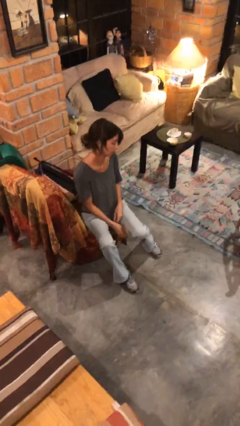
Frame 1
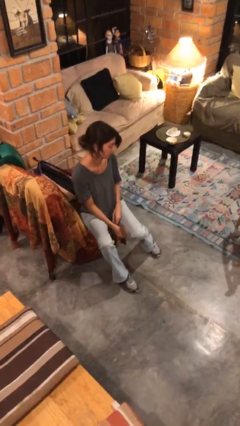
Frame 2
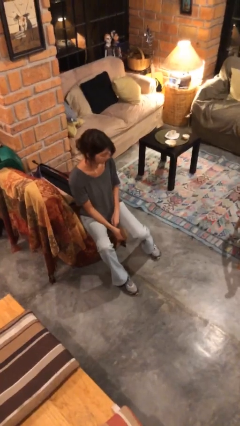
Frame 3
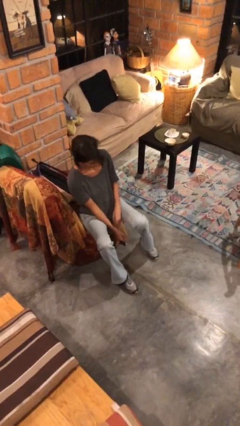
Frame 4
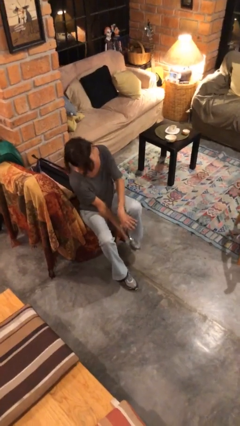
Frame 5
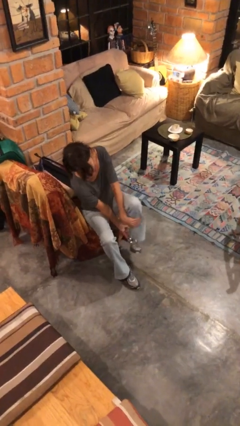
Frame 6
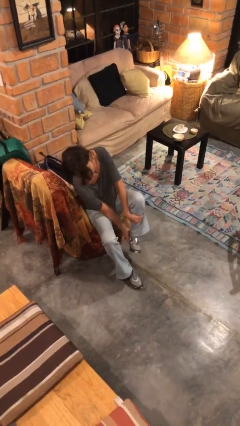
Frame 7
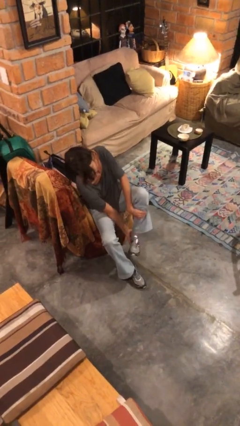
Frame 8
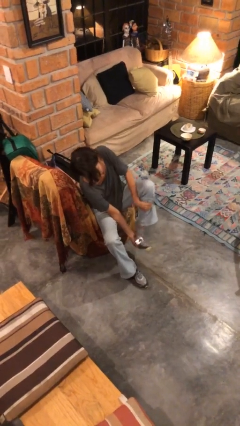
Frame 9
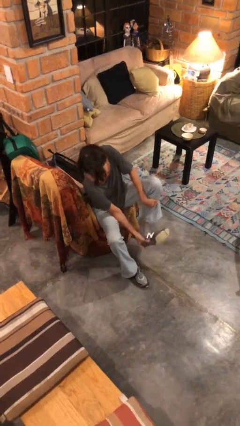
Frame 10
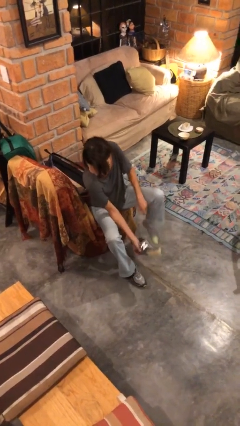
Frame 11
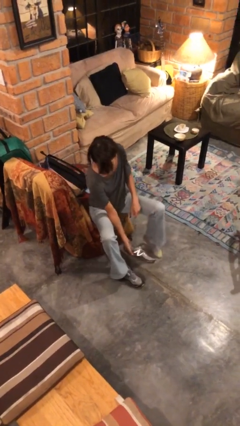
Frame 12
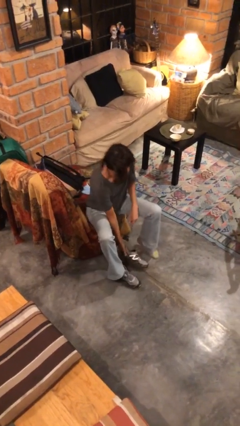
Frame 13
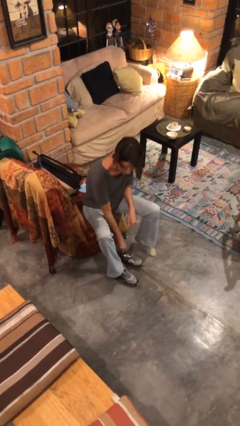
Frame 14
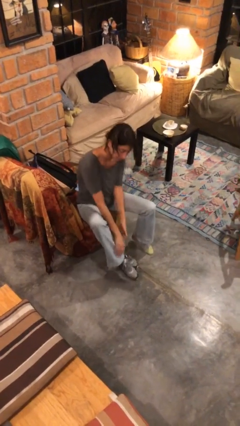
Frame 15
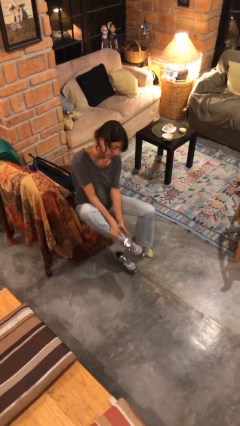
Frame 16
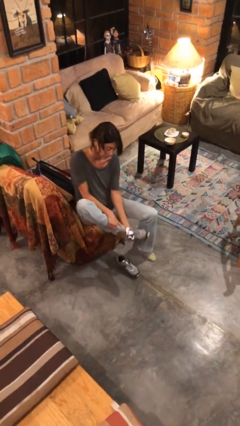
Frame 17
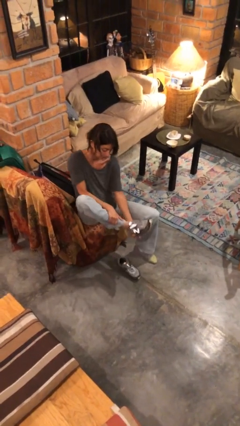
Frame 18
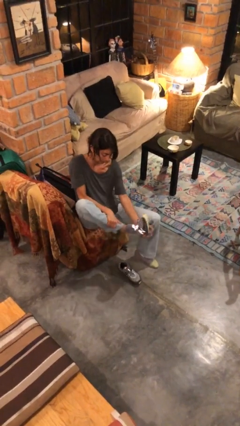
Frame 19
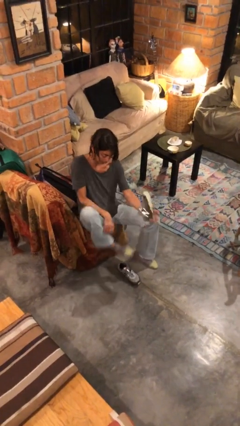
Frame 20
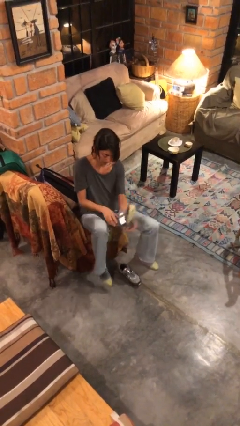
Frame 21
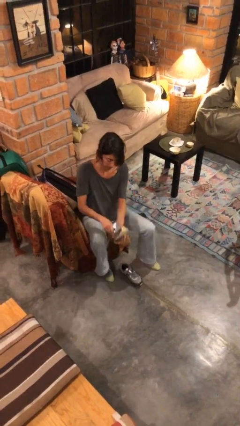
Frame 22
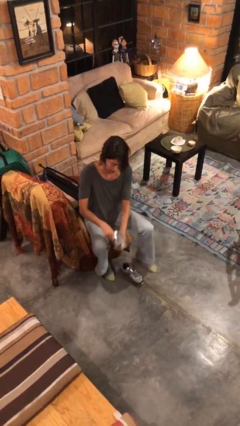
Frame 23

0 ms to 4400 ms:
person takes off shoes

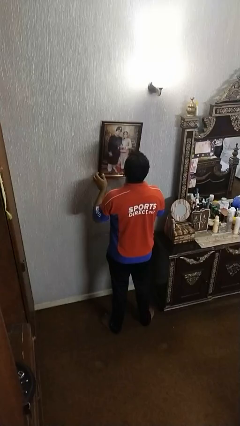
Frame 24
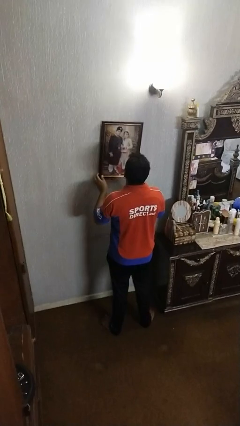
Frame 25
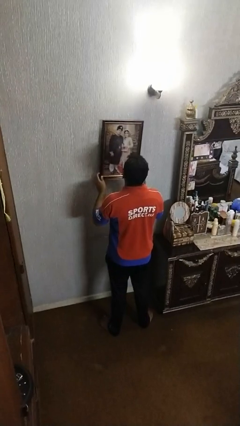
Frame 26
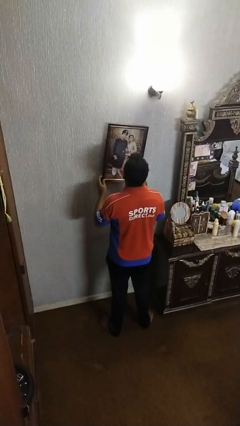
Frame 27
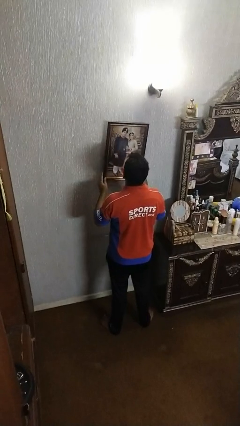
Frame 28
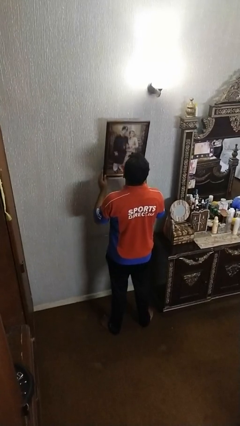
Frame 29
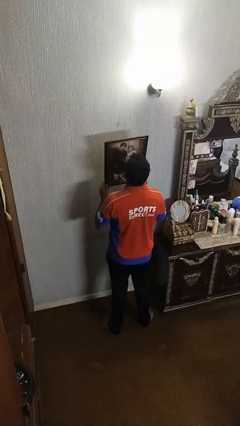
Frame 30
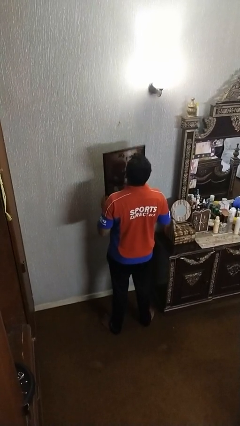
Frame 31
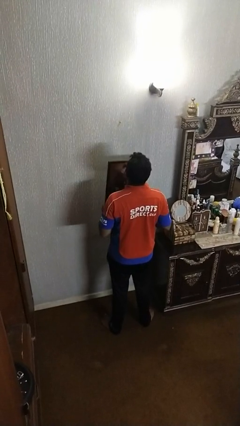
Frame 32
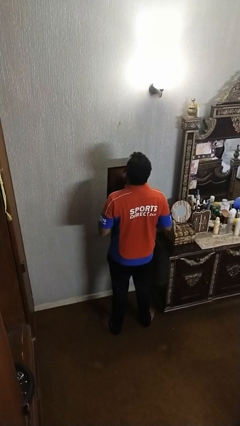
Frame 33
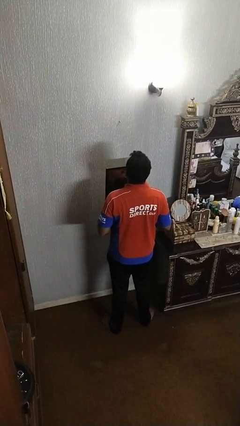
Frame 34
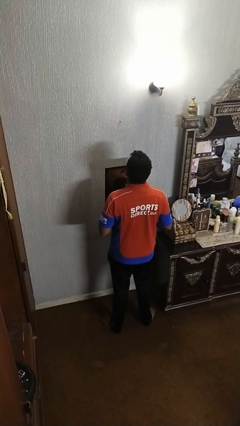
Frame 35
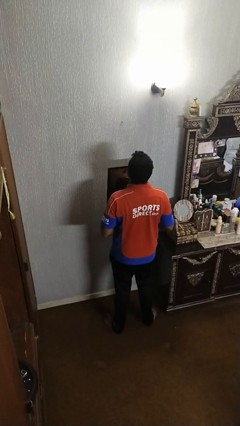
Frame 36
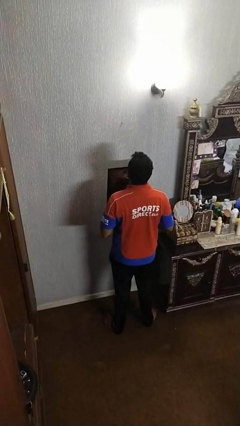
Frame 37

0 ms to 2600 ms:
person takes down picture frame

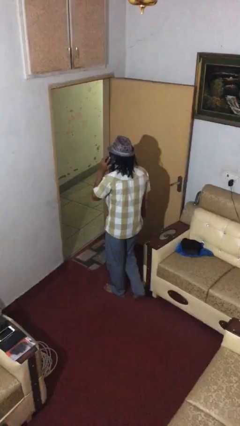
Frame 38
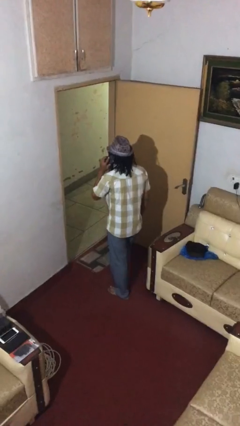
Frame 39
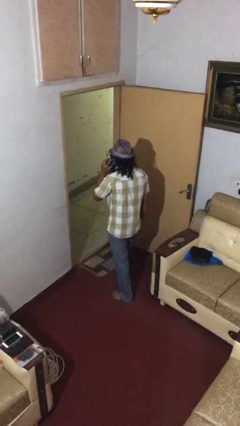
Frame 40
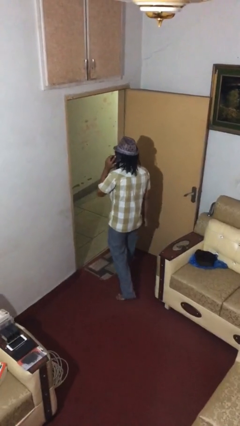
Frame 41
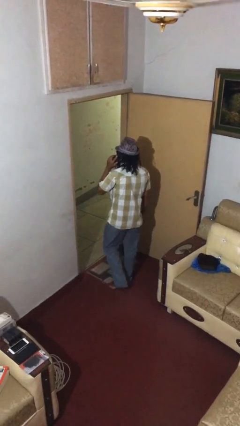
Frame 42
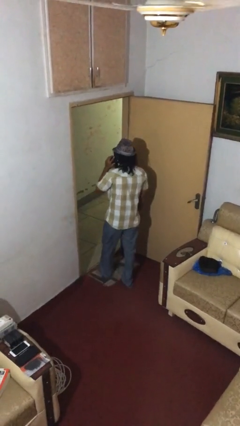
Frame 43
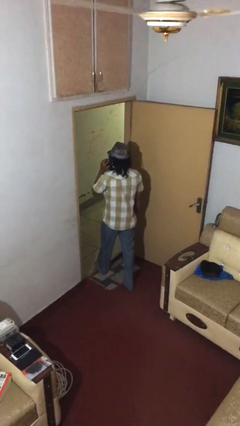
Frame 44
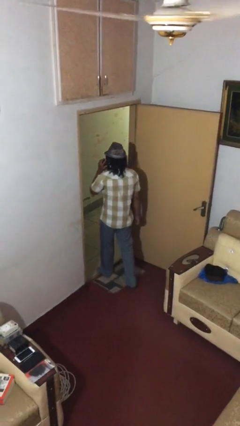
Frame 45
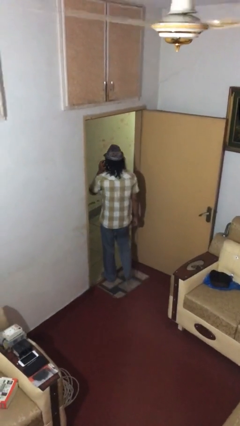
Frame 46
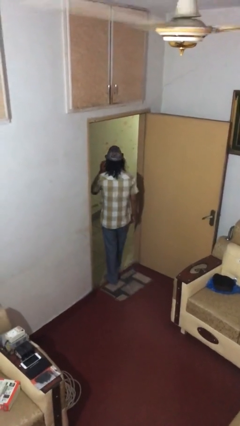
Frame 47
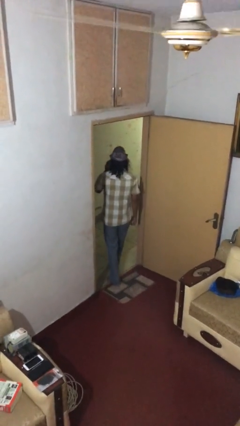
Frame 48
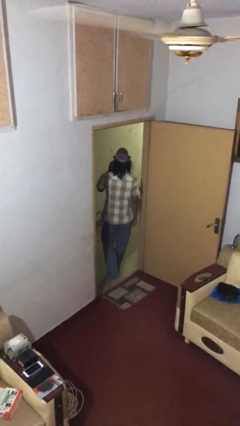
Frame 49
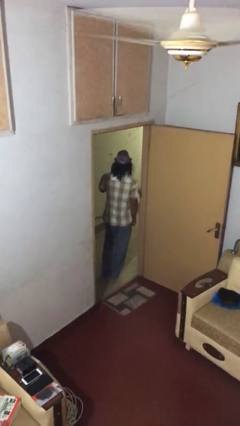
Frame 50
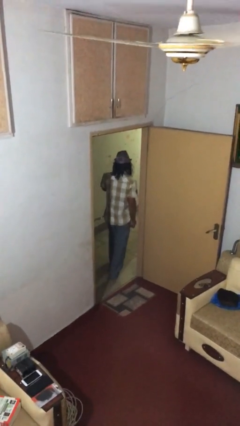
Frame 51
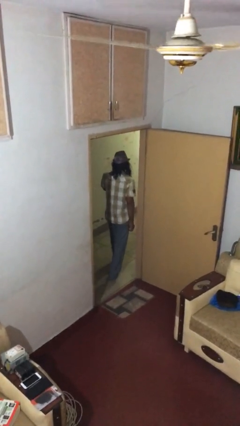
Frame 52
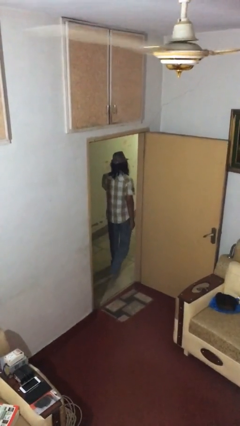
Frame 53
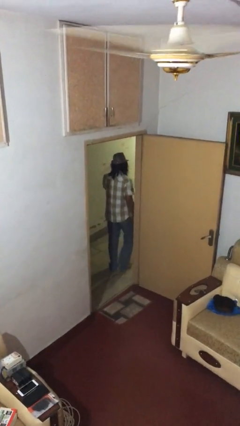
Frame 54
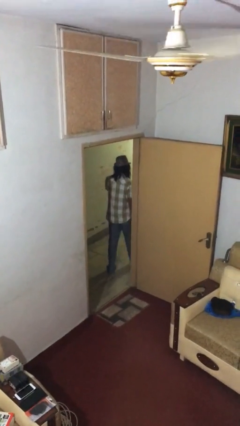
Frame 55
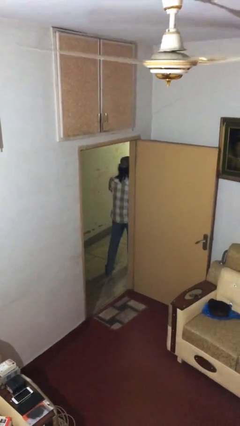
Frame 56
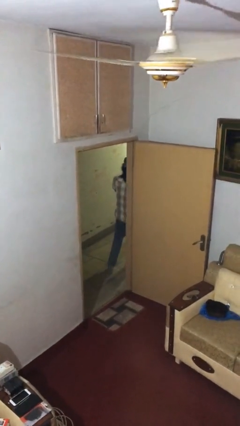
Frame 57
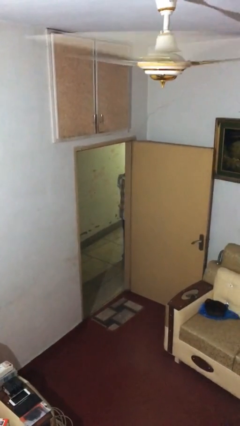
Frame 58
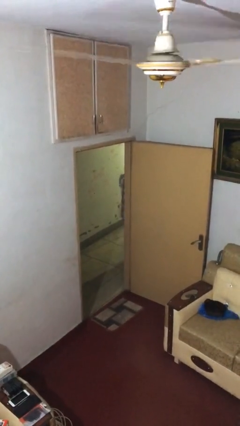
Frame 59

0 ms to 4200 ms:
person exits scene through structure

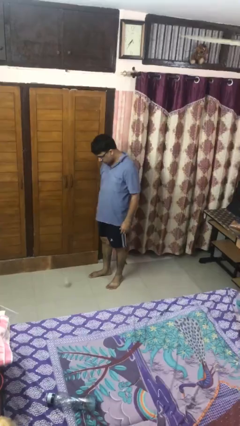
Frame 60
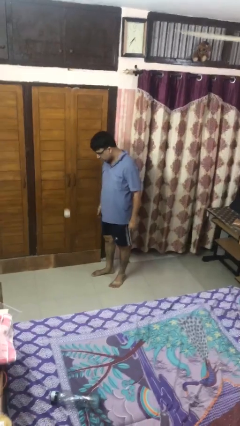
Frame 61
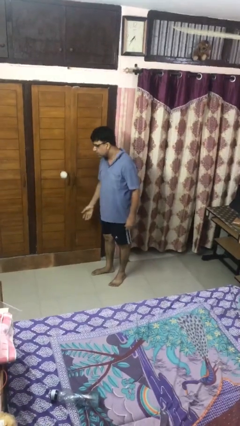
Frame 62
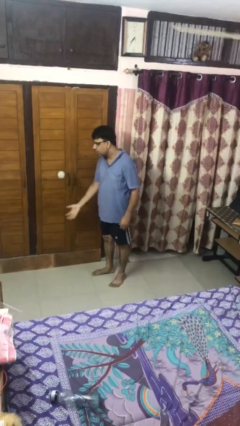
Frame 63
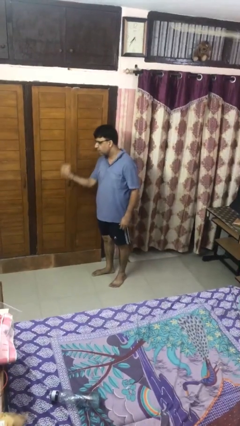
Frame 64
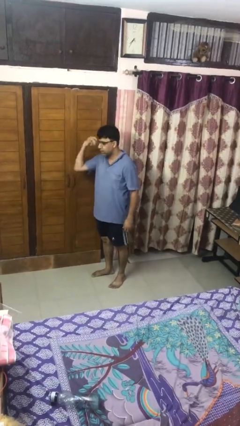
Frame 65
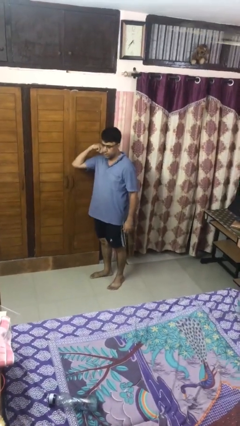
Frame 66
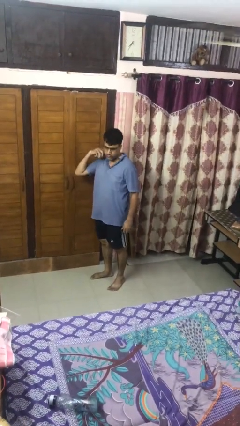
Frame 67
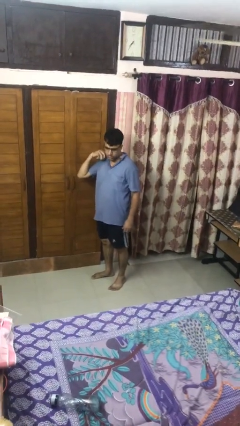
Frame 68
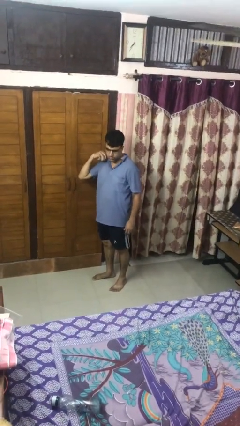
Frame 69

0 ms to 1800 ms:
person bounces ball on floor

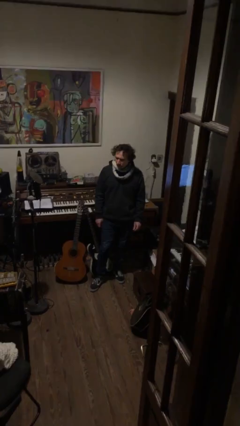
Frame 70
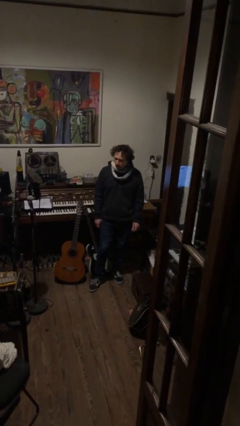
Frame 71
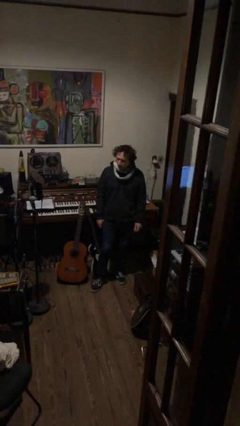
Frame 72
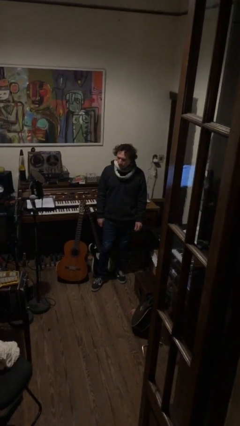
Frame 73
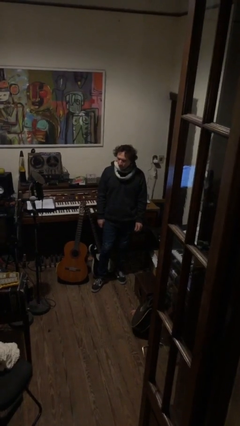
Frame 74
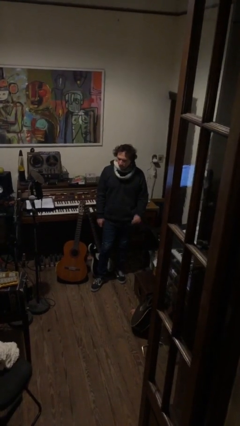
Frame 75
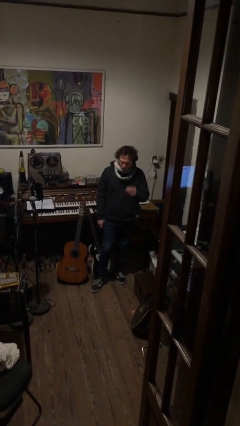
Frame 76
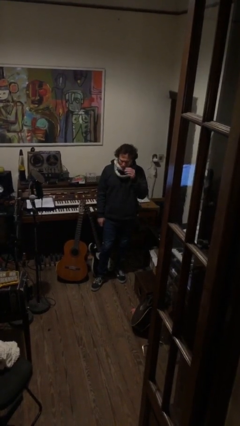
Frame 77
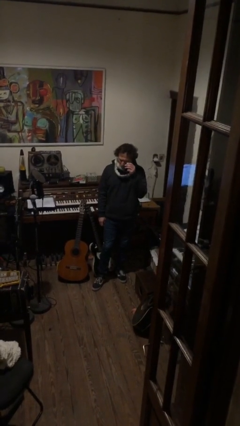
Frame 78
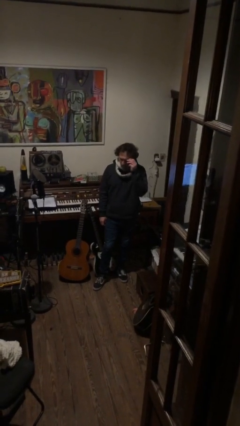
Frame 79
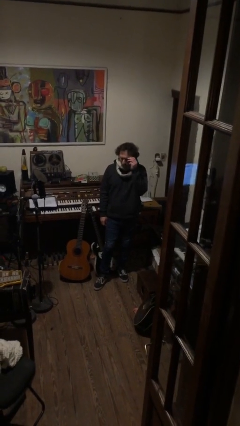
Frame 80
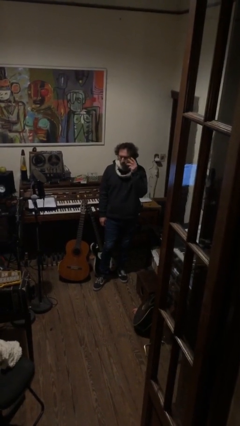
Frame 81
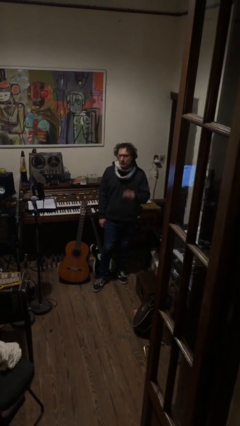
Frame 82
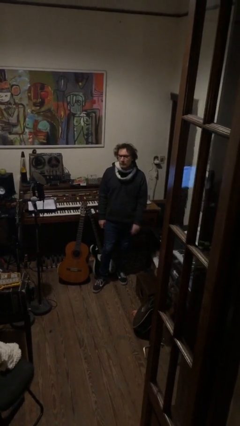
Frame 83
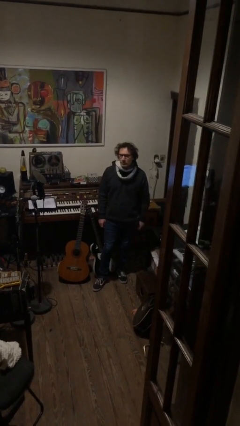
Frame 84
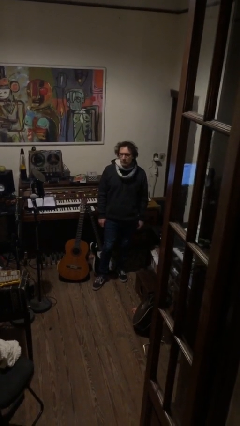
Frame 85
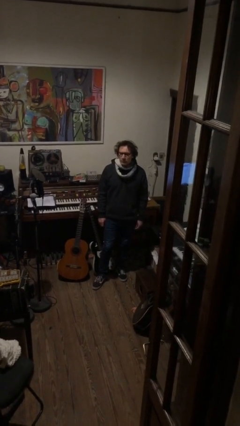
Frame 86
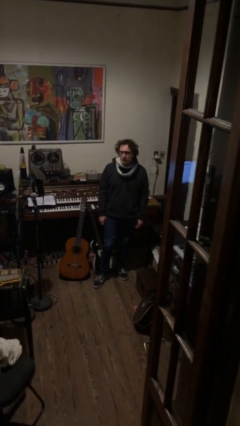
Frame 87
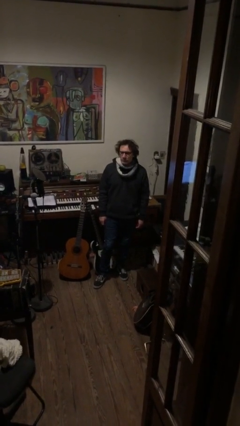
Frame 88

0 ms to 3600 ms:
person puts on glasses

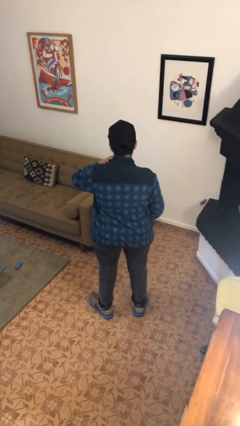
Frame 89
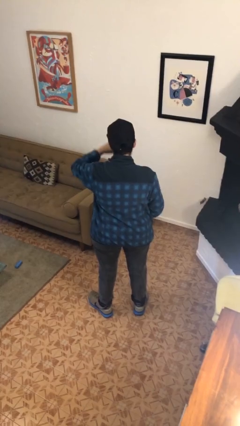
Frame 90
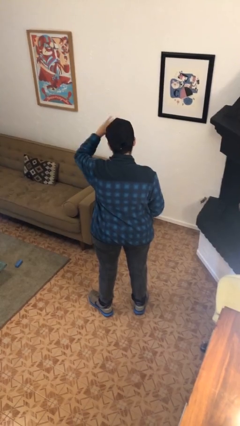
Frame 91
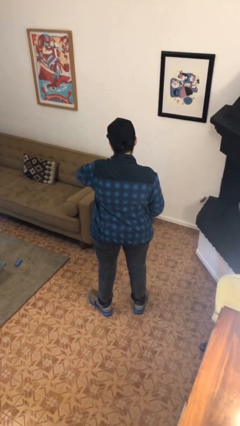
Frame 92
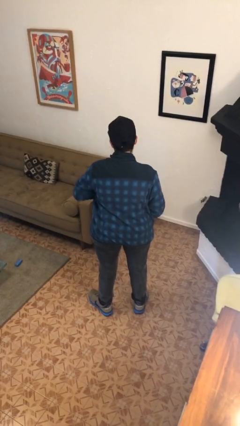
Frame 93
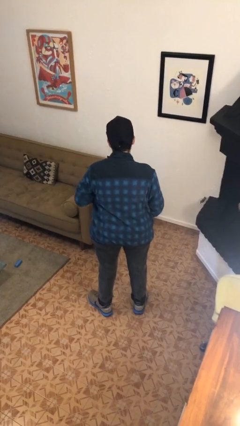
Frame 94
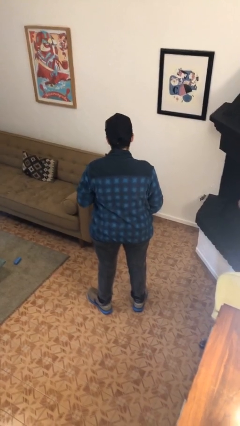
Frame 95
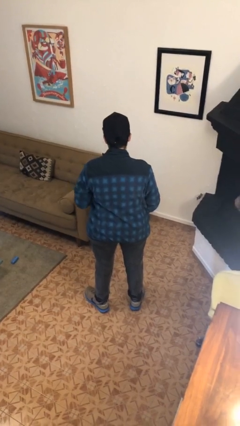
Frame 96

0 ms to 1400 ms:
person gestures swipe down
